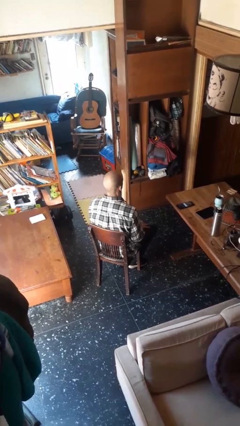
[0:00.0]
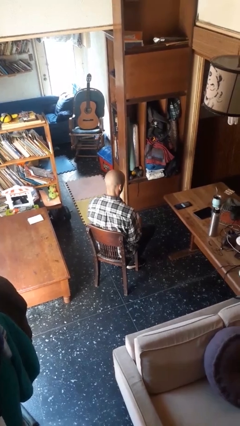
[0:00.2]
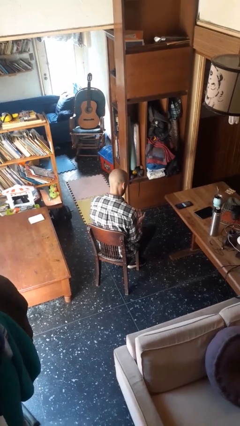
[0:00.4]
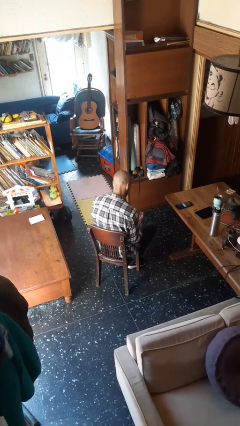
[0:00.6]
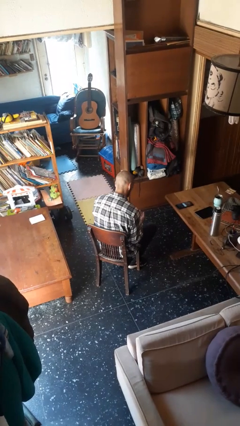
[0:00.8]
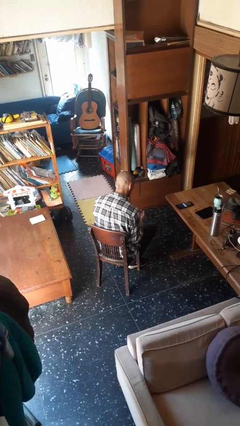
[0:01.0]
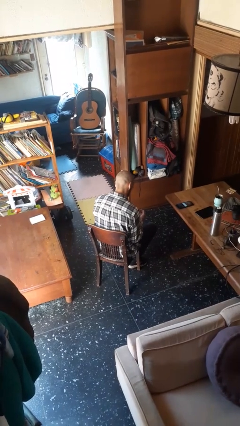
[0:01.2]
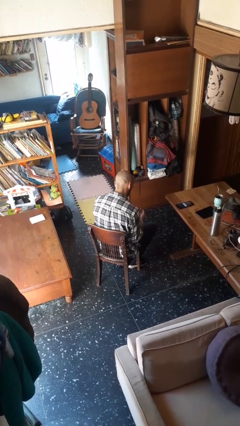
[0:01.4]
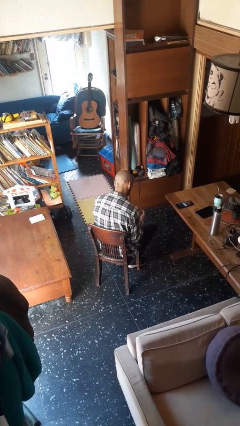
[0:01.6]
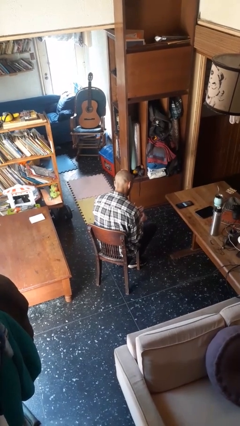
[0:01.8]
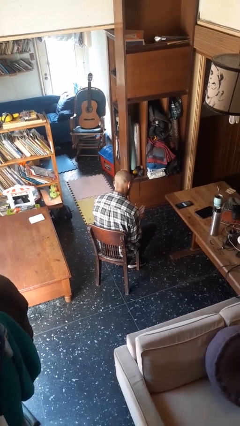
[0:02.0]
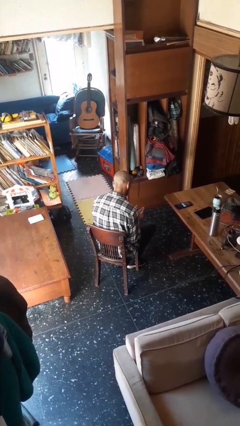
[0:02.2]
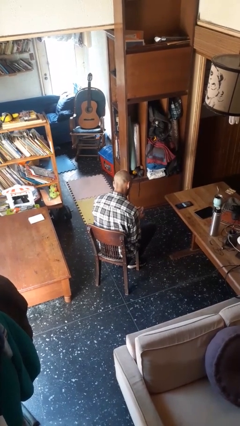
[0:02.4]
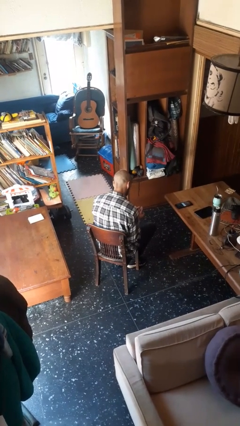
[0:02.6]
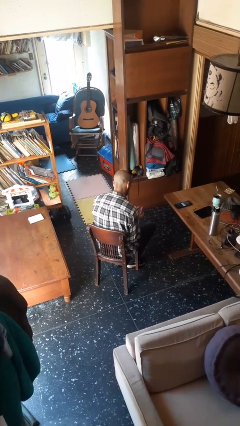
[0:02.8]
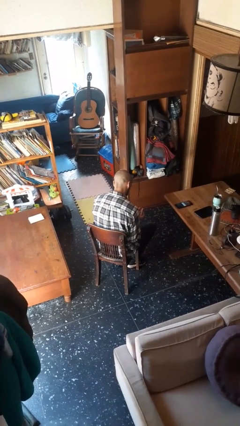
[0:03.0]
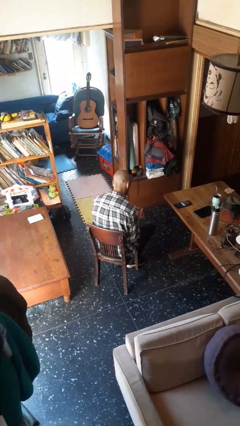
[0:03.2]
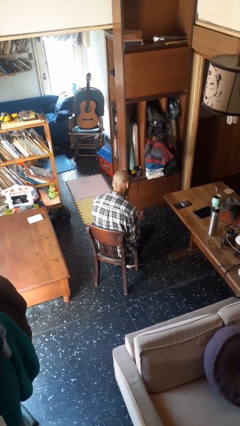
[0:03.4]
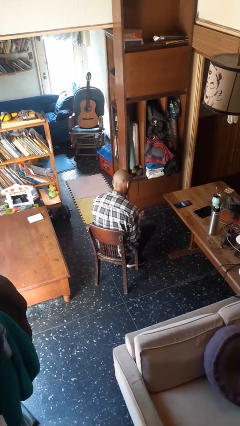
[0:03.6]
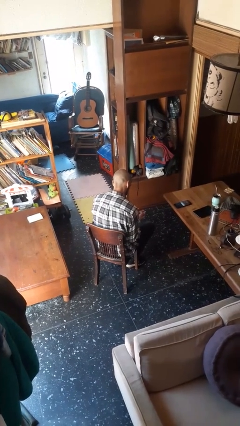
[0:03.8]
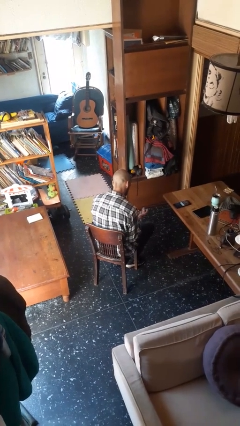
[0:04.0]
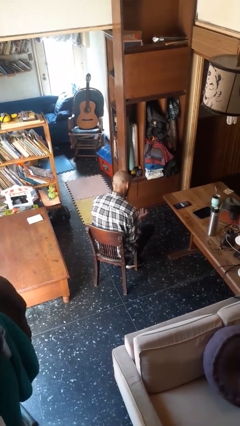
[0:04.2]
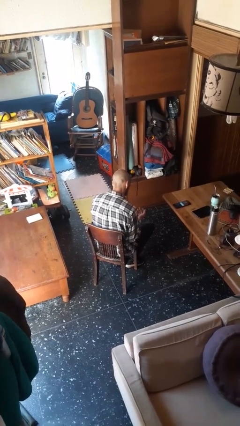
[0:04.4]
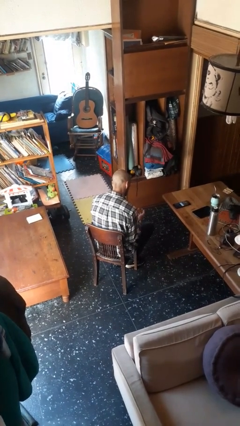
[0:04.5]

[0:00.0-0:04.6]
person looks at hands in lap

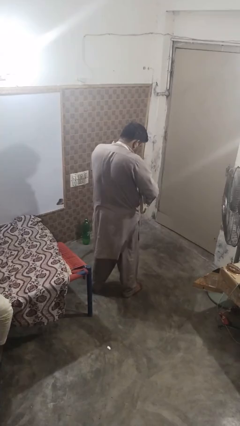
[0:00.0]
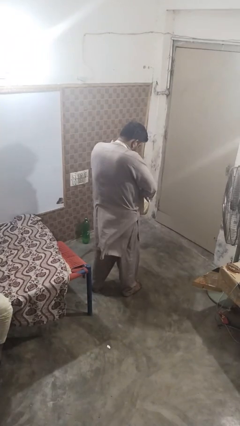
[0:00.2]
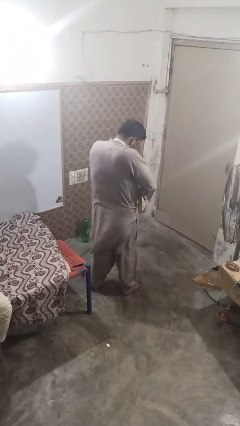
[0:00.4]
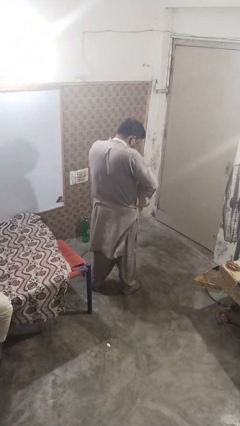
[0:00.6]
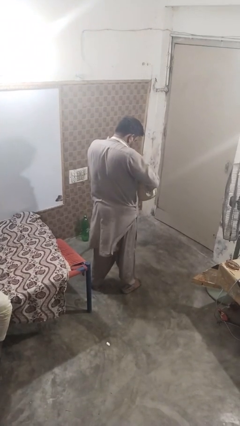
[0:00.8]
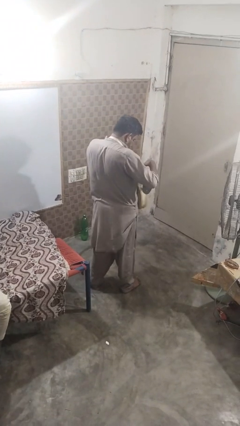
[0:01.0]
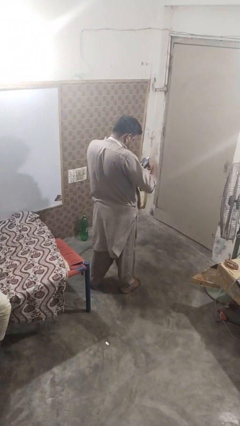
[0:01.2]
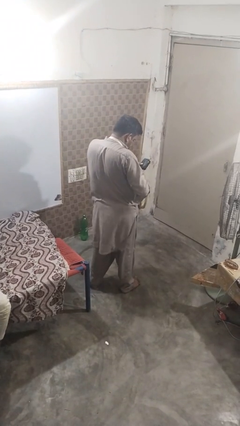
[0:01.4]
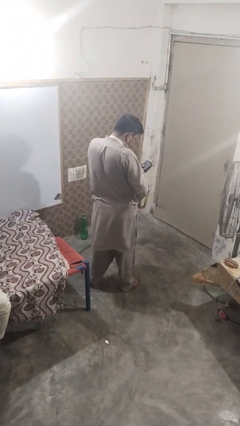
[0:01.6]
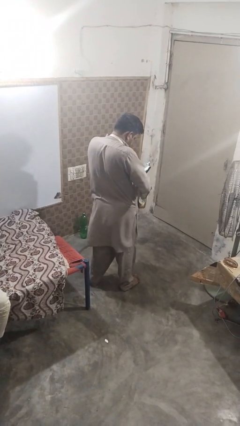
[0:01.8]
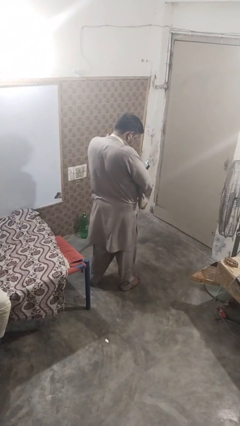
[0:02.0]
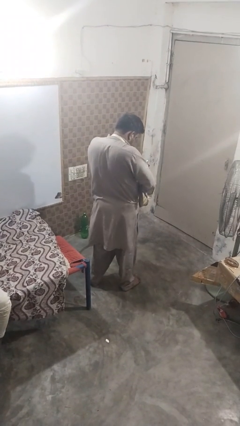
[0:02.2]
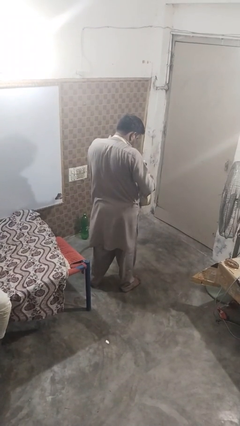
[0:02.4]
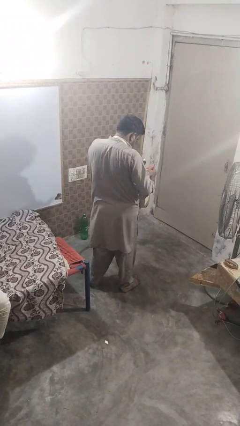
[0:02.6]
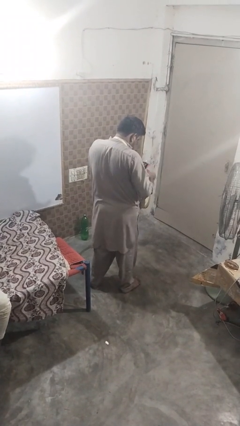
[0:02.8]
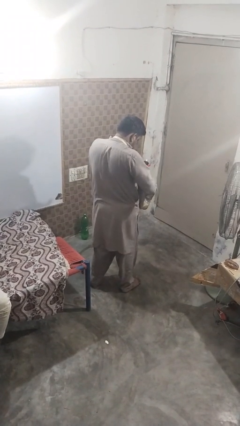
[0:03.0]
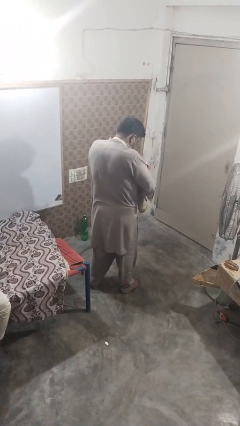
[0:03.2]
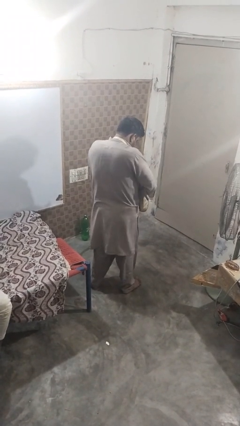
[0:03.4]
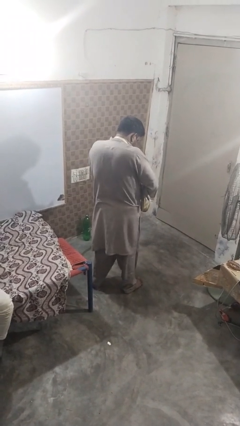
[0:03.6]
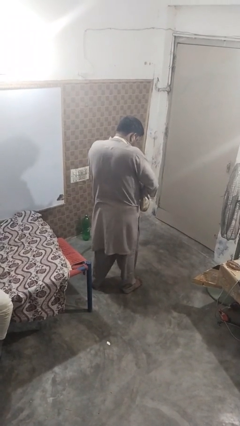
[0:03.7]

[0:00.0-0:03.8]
person takes object from purse

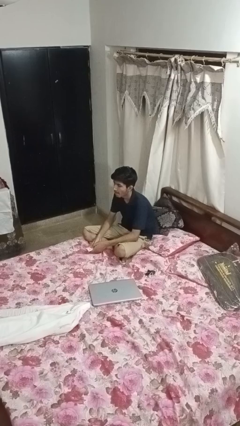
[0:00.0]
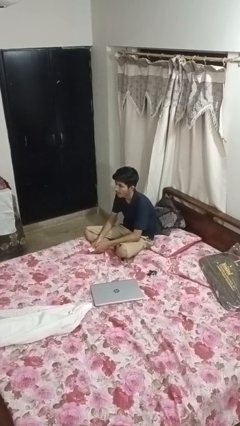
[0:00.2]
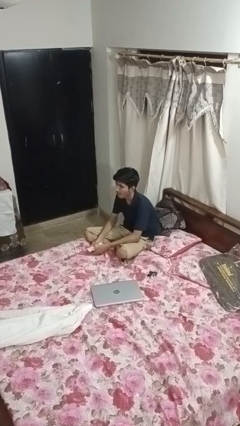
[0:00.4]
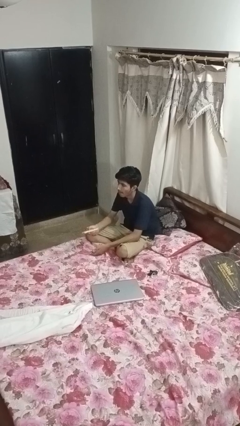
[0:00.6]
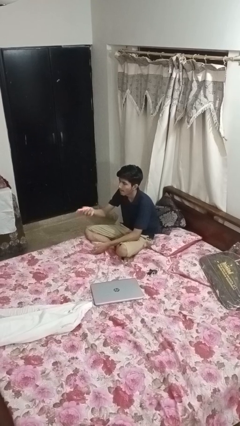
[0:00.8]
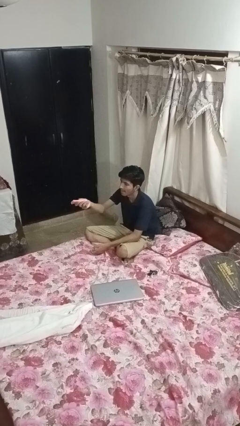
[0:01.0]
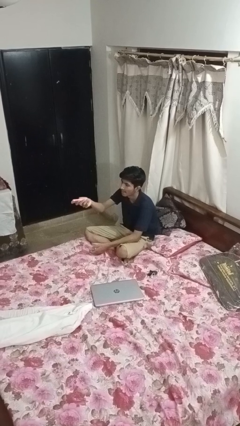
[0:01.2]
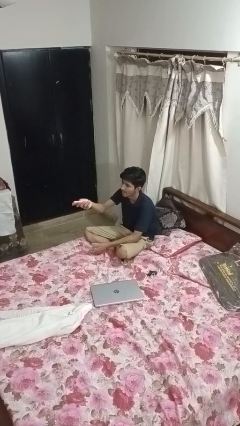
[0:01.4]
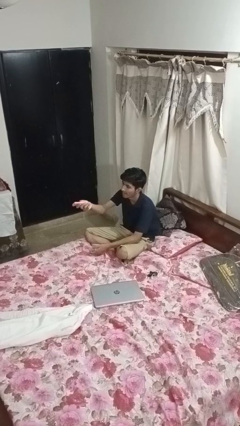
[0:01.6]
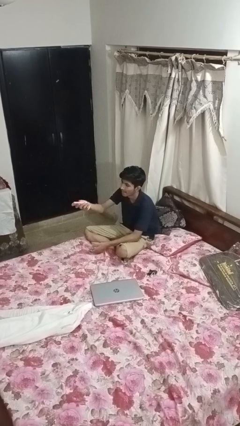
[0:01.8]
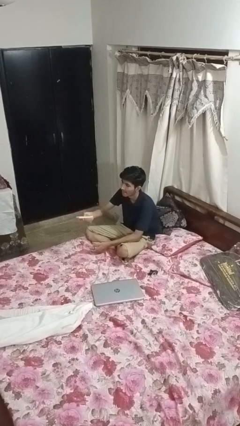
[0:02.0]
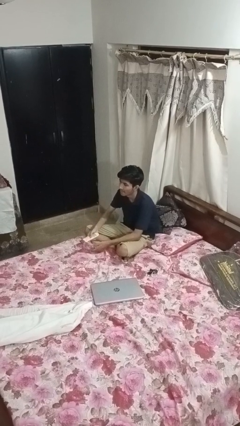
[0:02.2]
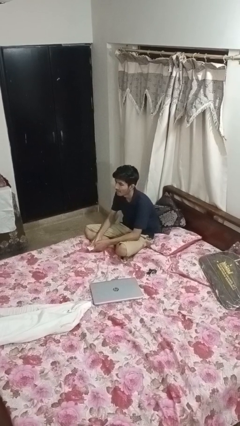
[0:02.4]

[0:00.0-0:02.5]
person uses television remote

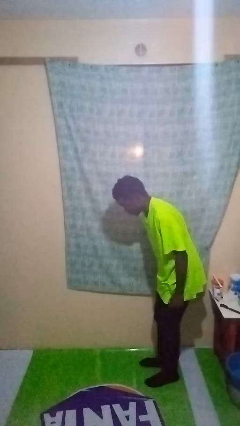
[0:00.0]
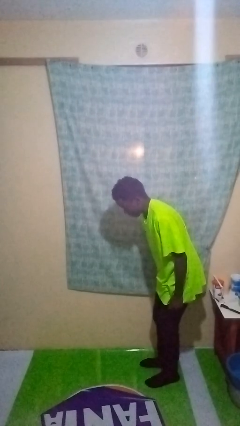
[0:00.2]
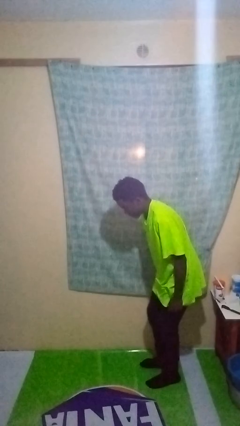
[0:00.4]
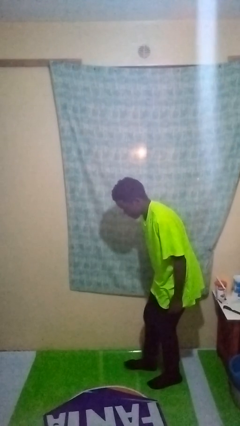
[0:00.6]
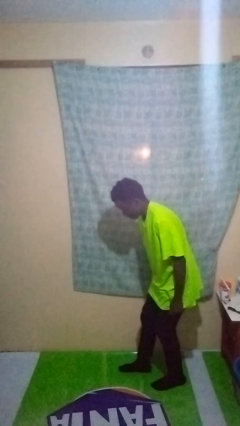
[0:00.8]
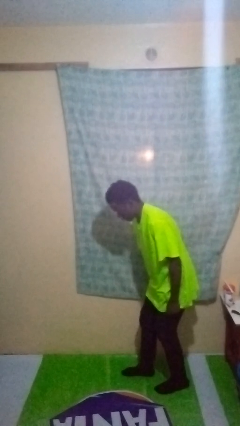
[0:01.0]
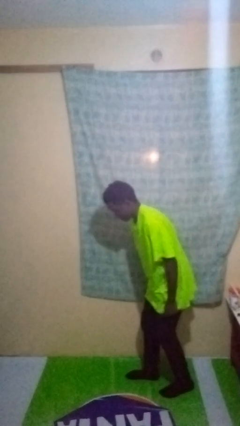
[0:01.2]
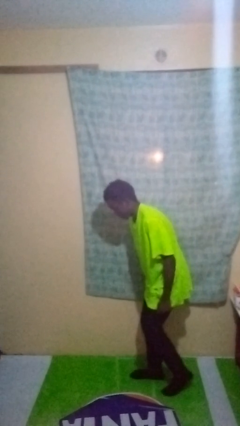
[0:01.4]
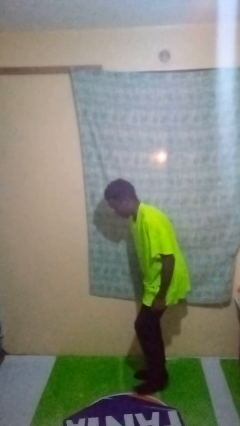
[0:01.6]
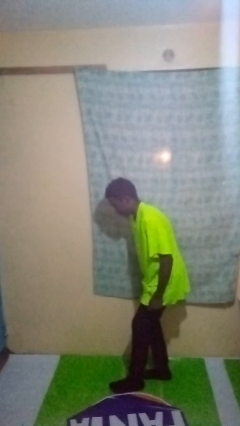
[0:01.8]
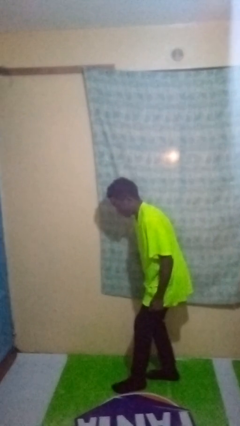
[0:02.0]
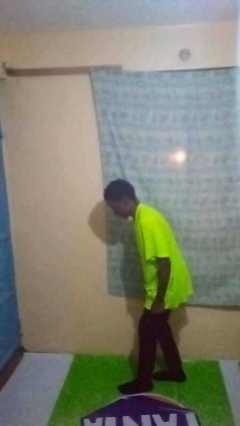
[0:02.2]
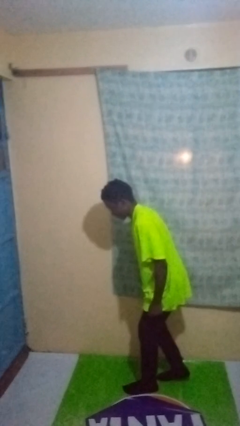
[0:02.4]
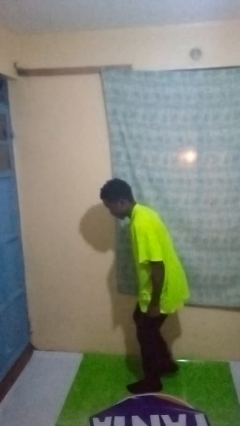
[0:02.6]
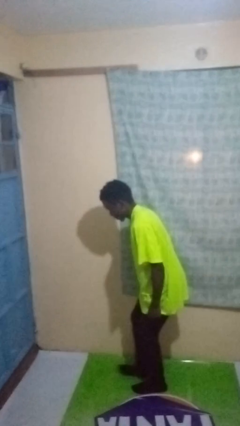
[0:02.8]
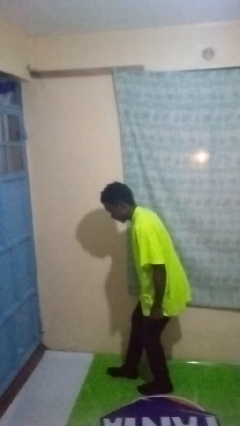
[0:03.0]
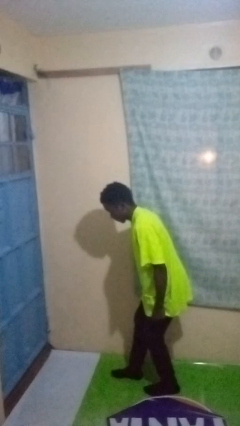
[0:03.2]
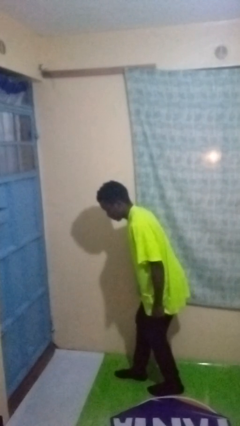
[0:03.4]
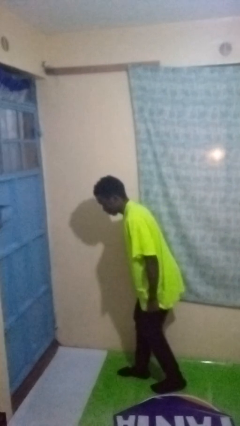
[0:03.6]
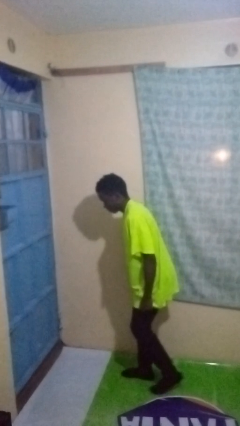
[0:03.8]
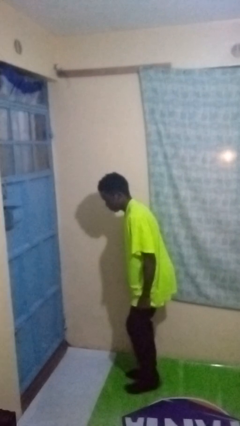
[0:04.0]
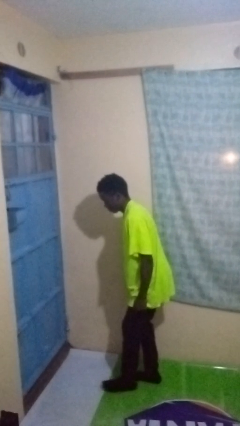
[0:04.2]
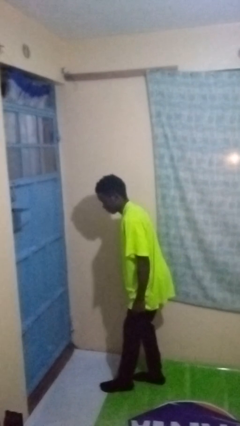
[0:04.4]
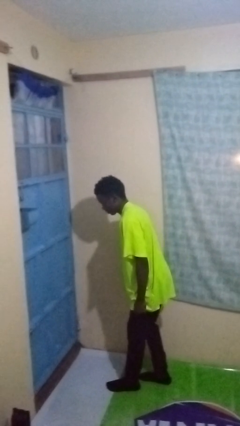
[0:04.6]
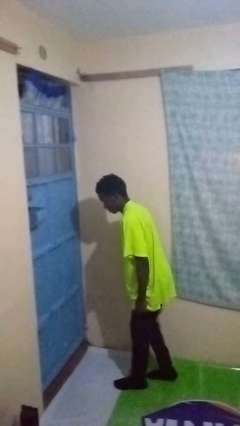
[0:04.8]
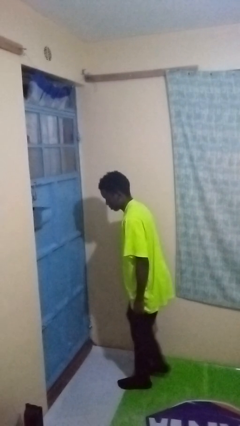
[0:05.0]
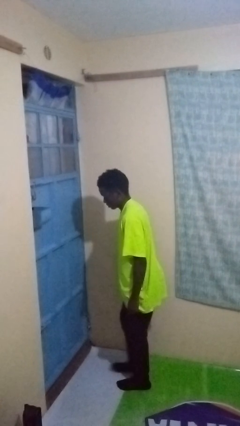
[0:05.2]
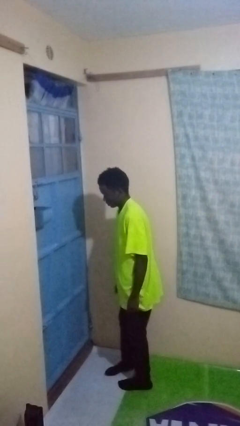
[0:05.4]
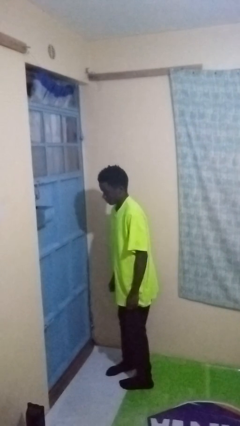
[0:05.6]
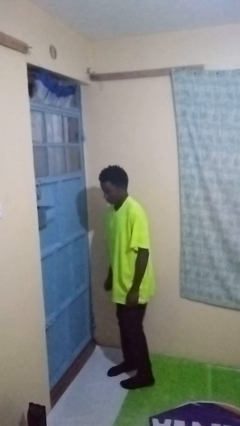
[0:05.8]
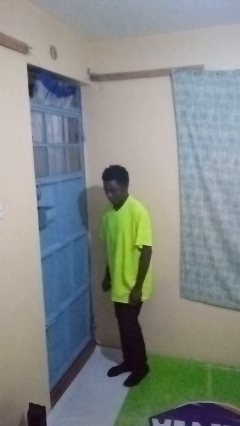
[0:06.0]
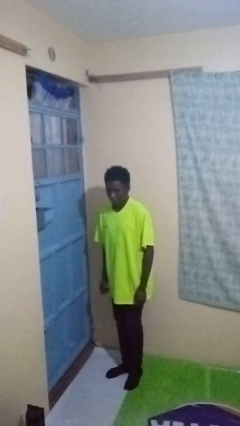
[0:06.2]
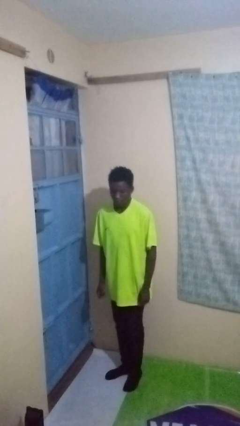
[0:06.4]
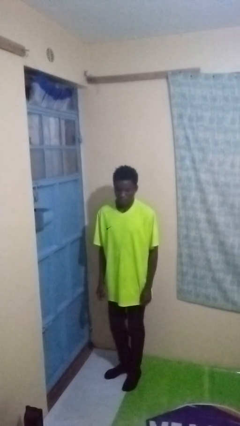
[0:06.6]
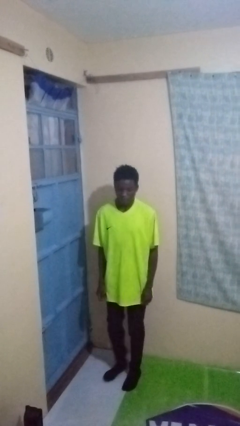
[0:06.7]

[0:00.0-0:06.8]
person walks tiptoe
